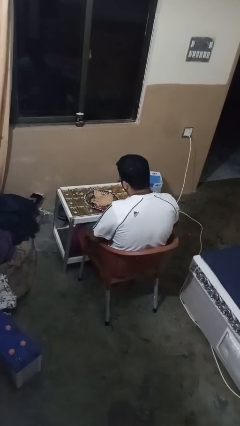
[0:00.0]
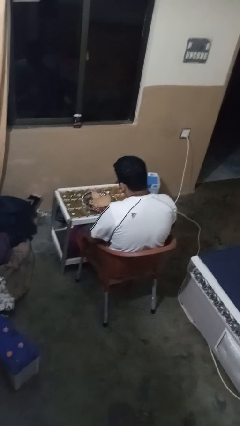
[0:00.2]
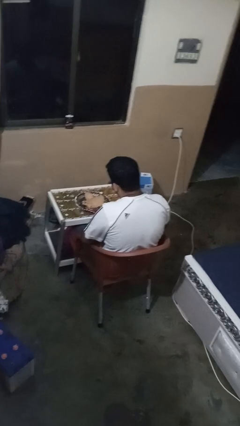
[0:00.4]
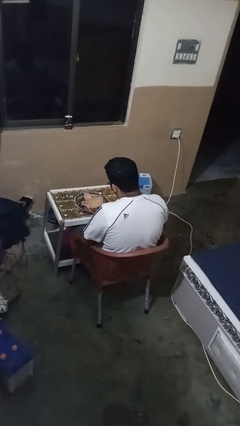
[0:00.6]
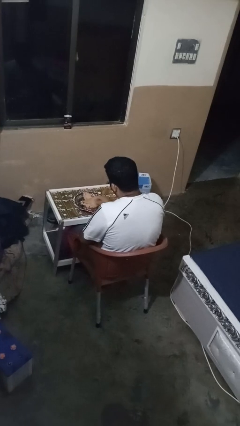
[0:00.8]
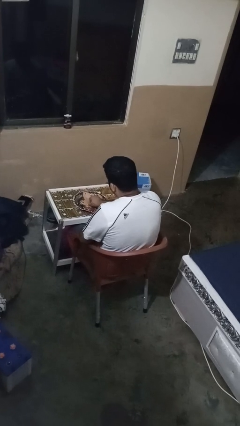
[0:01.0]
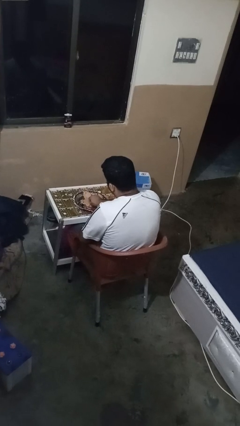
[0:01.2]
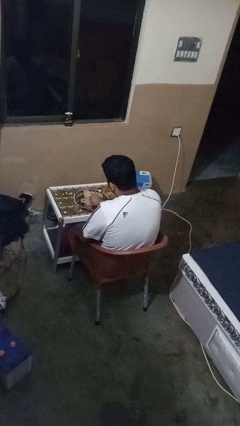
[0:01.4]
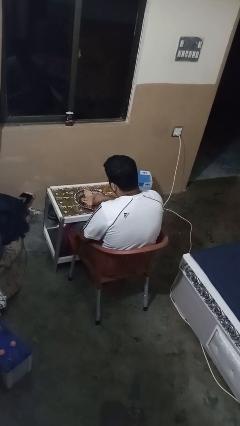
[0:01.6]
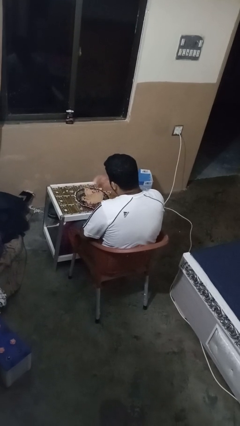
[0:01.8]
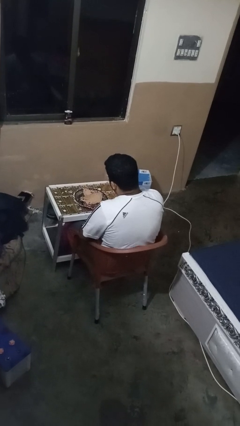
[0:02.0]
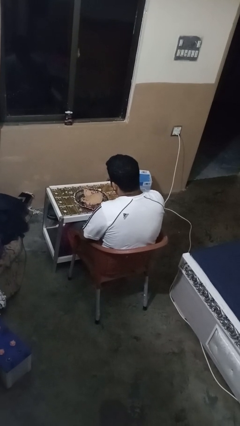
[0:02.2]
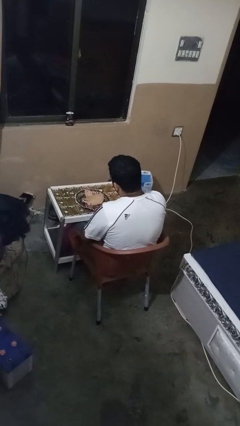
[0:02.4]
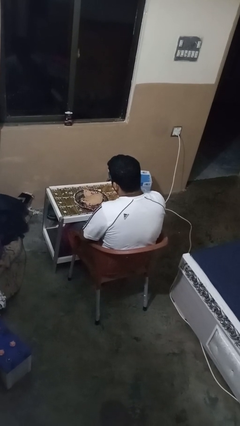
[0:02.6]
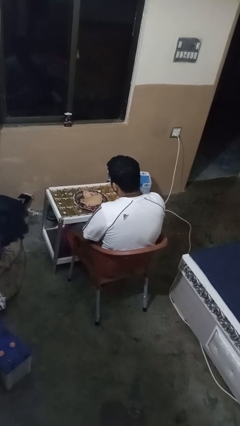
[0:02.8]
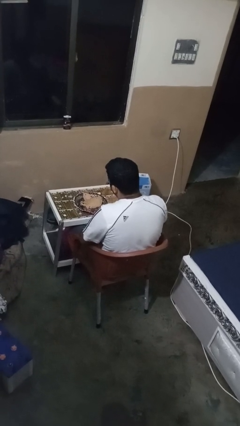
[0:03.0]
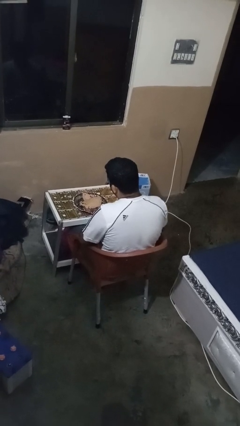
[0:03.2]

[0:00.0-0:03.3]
person eats with hands

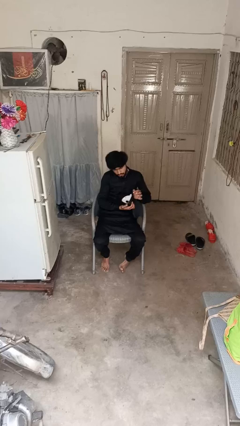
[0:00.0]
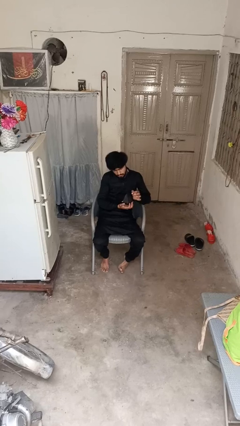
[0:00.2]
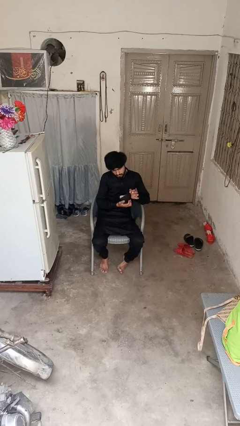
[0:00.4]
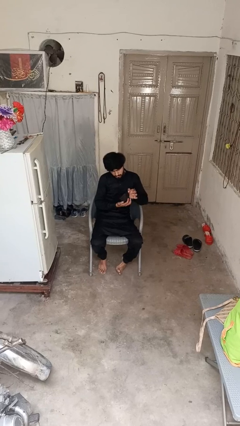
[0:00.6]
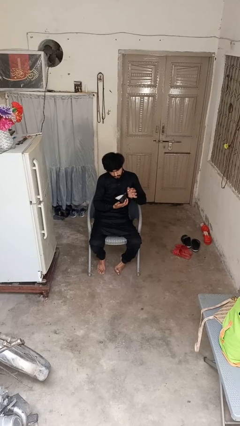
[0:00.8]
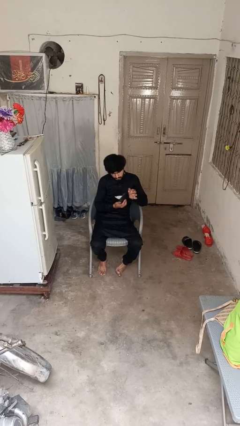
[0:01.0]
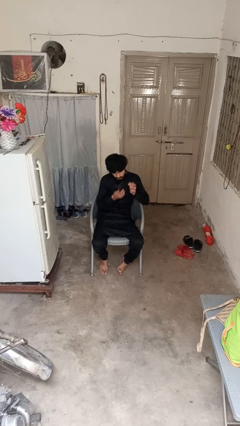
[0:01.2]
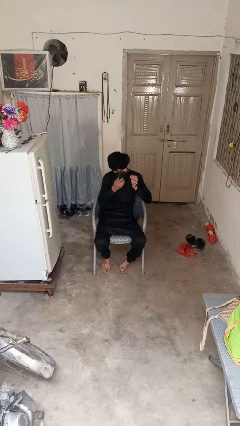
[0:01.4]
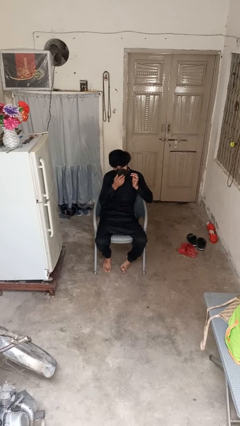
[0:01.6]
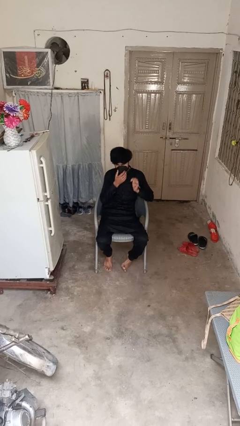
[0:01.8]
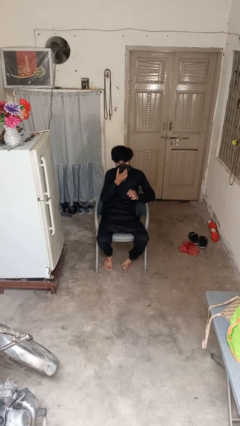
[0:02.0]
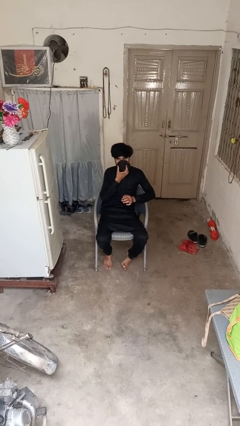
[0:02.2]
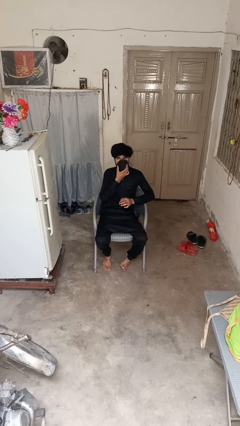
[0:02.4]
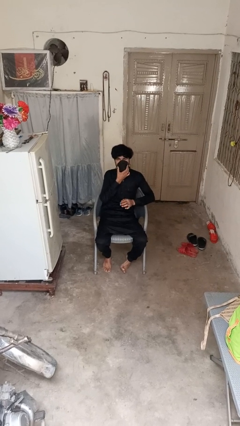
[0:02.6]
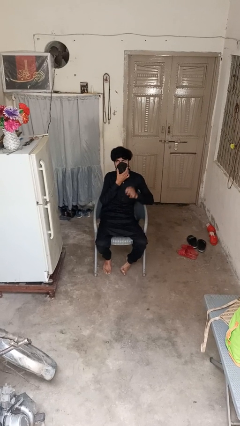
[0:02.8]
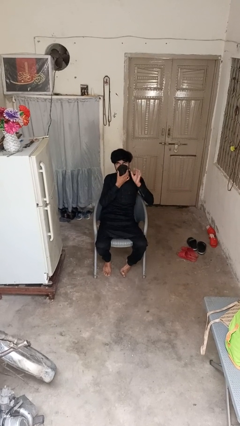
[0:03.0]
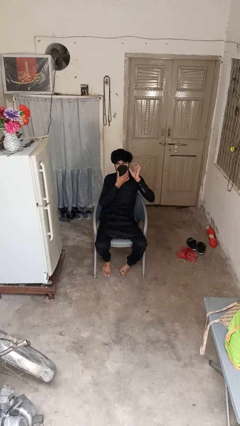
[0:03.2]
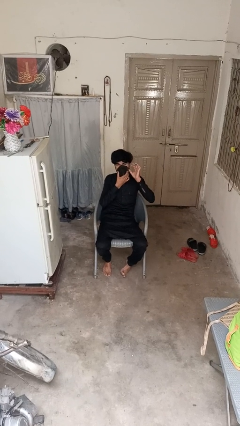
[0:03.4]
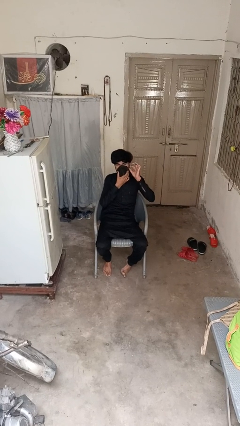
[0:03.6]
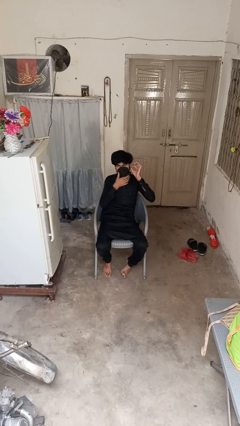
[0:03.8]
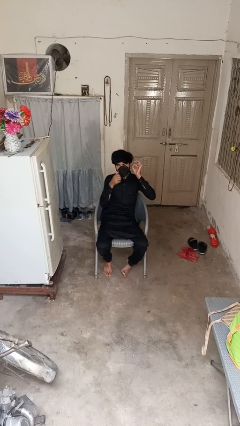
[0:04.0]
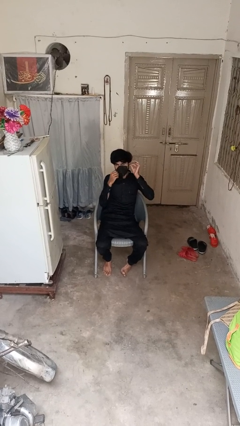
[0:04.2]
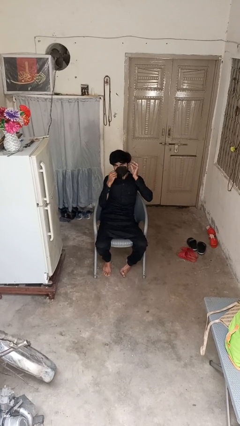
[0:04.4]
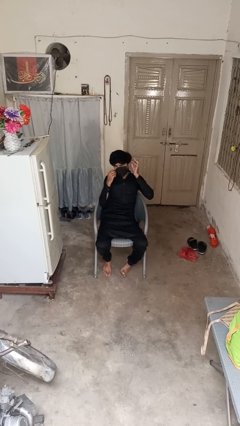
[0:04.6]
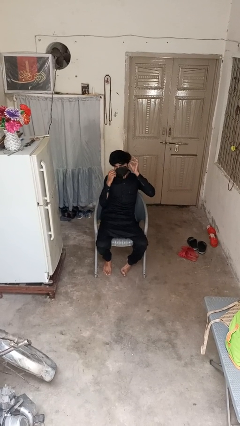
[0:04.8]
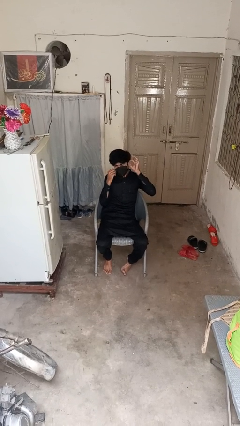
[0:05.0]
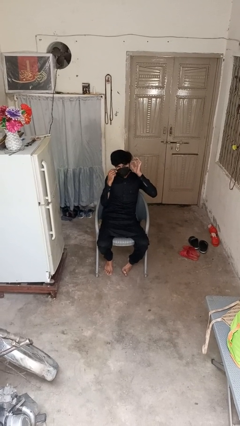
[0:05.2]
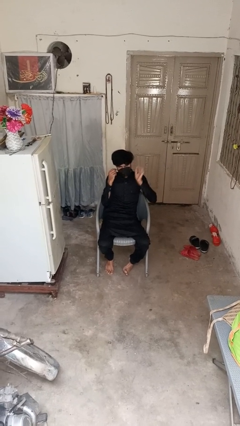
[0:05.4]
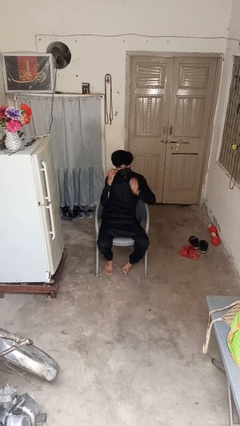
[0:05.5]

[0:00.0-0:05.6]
person puts on facemask

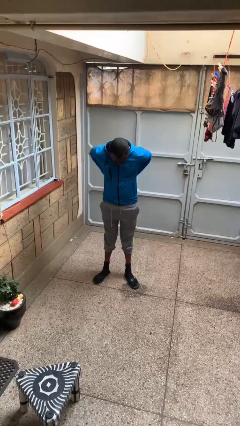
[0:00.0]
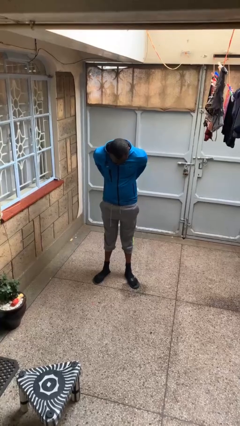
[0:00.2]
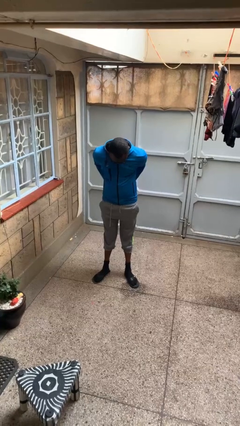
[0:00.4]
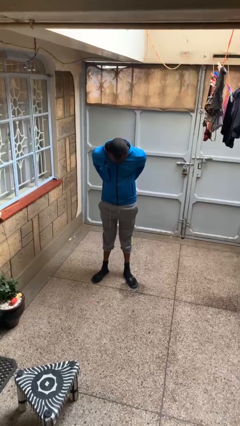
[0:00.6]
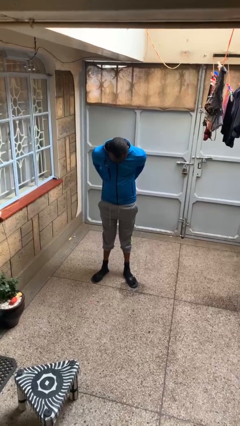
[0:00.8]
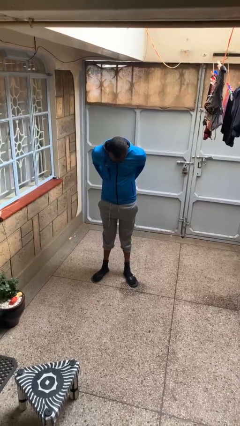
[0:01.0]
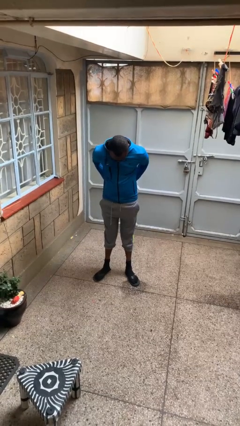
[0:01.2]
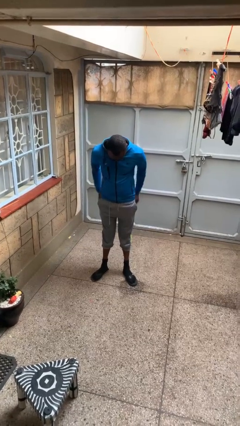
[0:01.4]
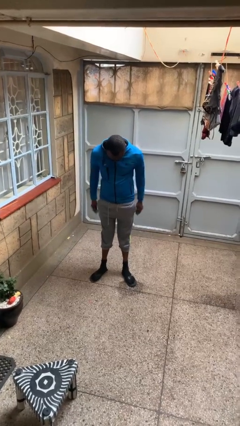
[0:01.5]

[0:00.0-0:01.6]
person puts hands in back pockets

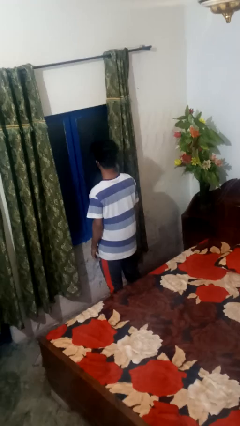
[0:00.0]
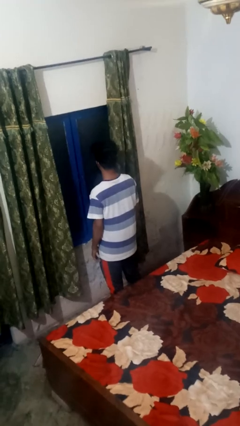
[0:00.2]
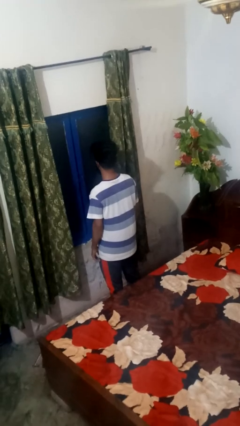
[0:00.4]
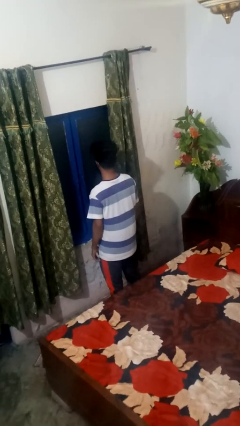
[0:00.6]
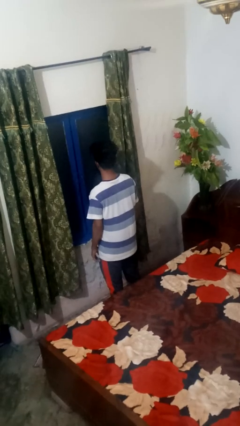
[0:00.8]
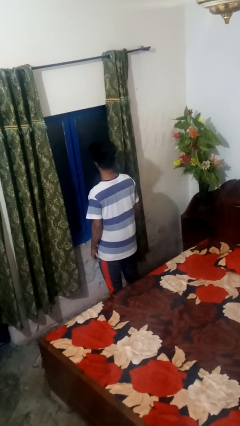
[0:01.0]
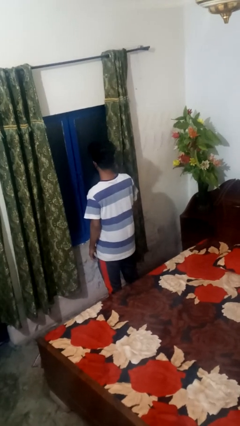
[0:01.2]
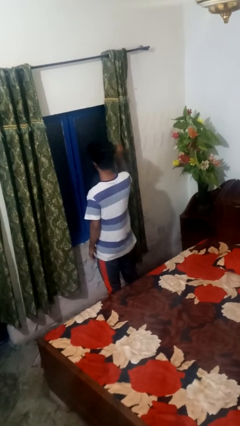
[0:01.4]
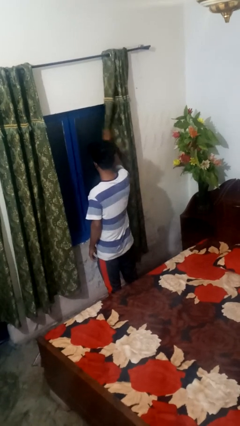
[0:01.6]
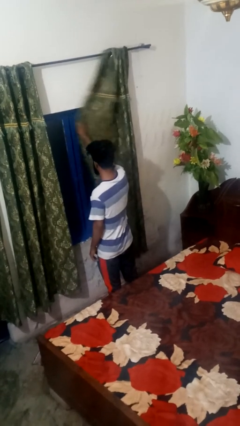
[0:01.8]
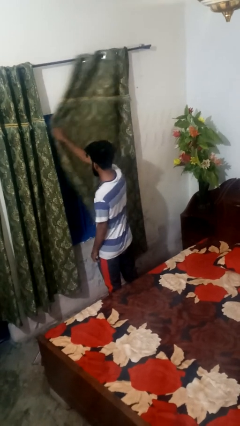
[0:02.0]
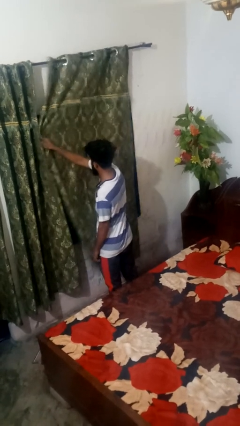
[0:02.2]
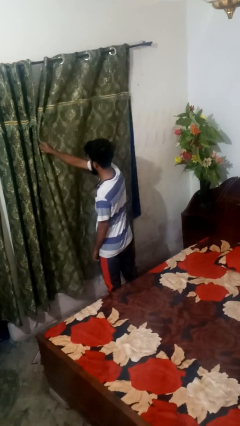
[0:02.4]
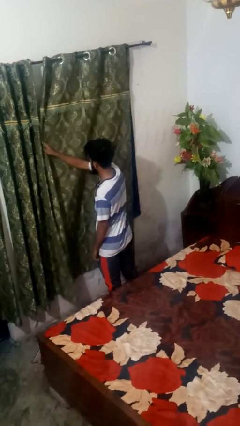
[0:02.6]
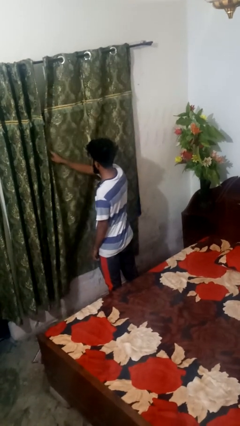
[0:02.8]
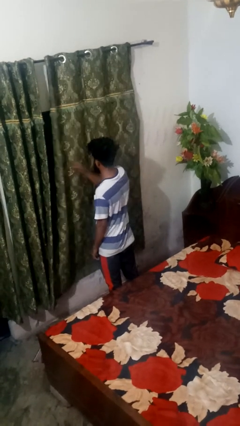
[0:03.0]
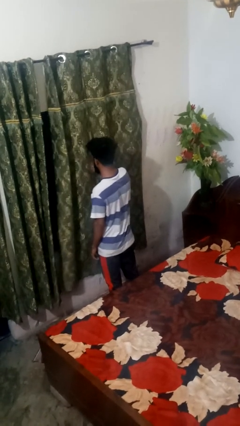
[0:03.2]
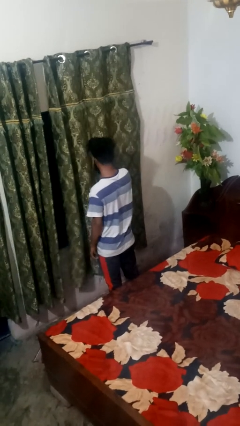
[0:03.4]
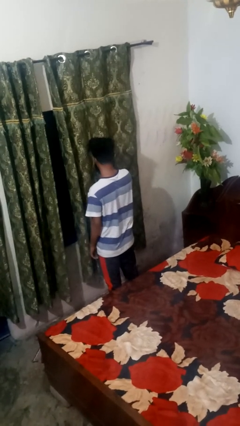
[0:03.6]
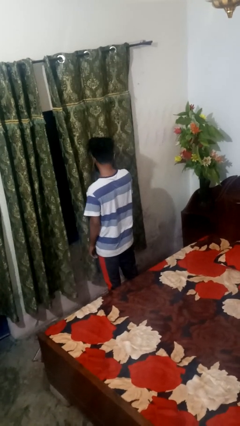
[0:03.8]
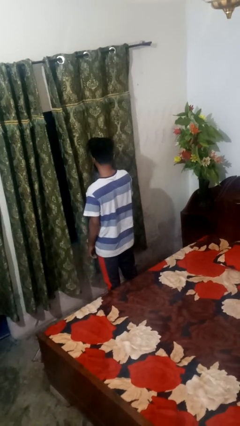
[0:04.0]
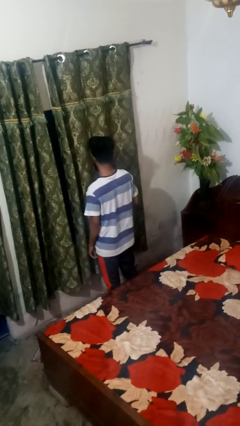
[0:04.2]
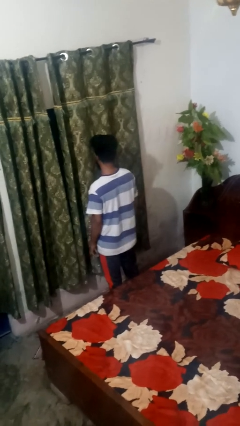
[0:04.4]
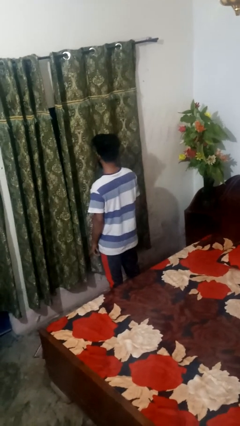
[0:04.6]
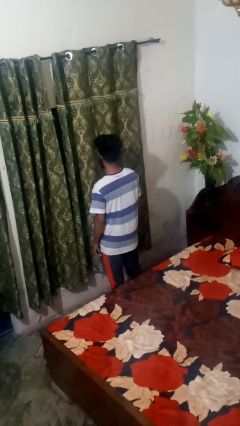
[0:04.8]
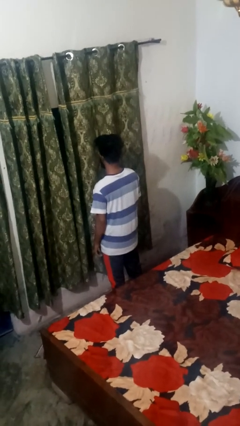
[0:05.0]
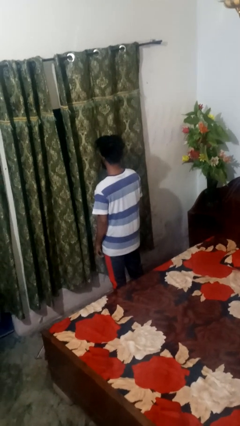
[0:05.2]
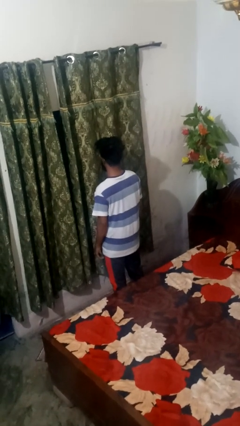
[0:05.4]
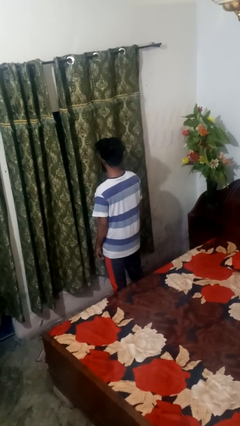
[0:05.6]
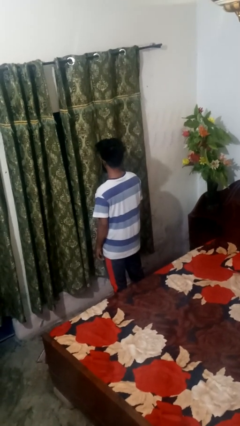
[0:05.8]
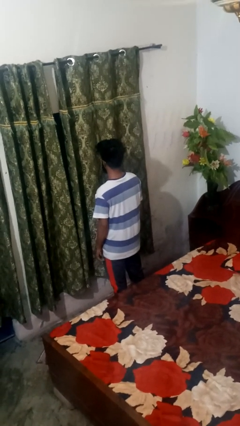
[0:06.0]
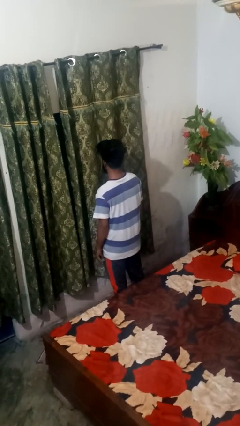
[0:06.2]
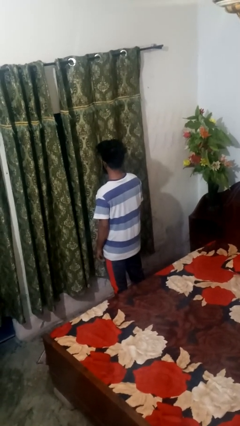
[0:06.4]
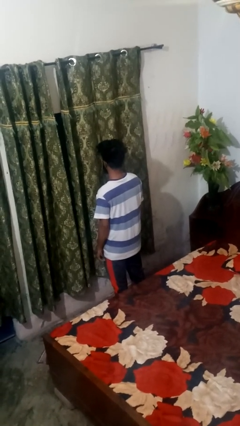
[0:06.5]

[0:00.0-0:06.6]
person closes curtains

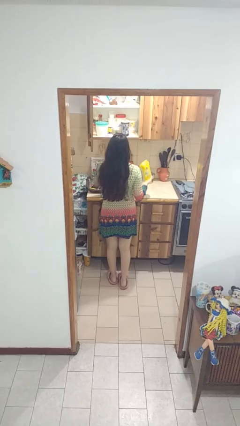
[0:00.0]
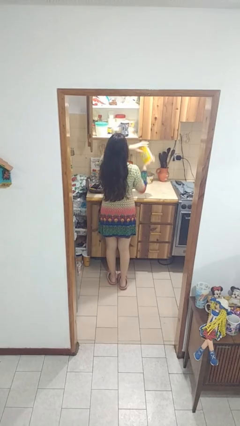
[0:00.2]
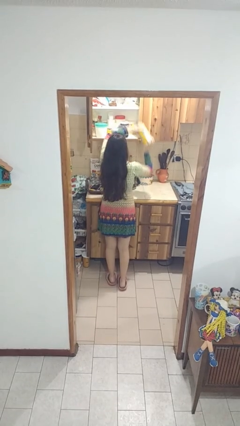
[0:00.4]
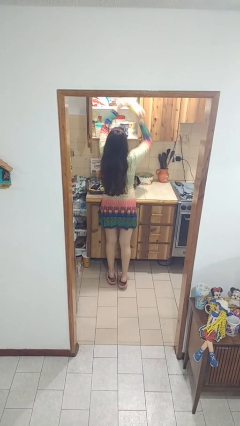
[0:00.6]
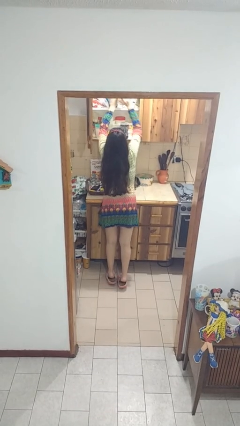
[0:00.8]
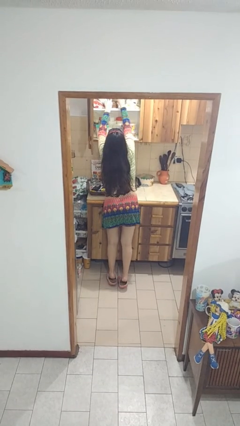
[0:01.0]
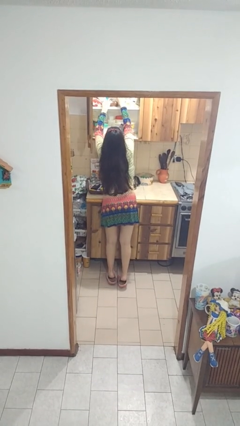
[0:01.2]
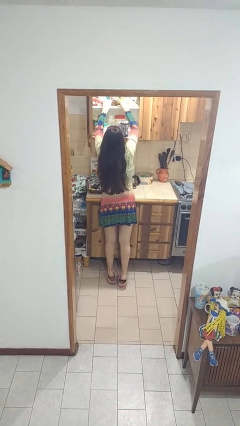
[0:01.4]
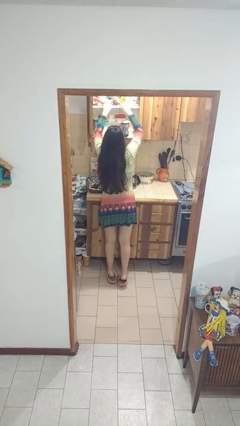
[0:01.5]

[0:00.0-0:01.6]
person puts object in cabinet
